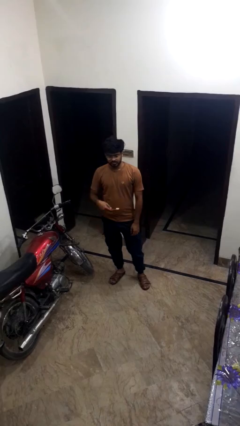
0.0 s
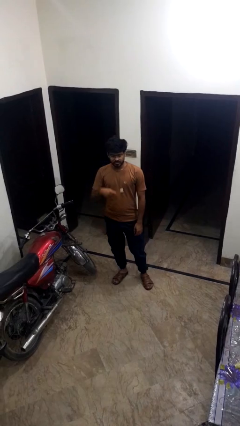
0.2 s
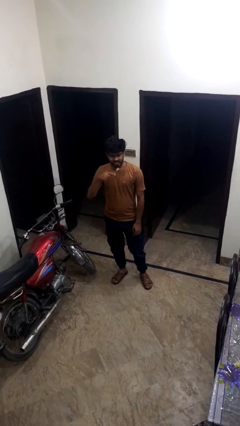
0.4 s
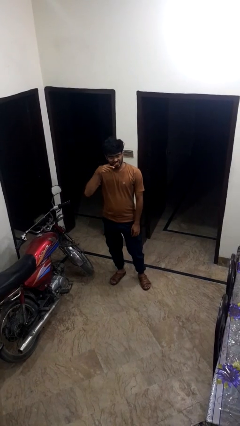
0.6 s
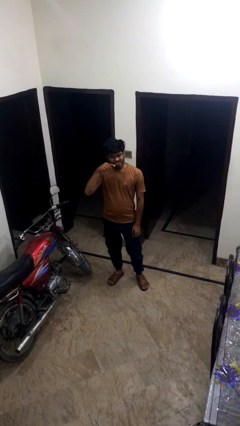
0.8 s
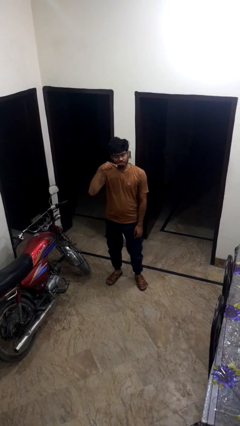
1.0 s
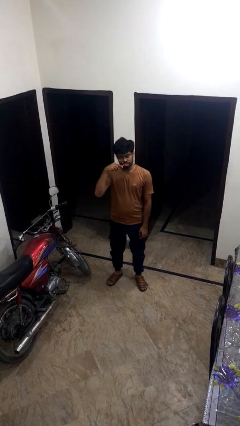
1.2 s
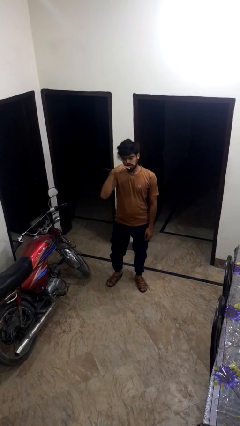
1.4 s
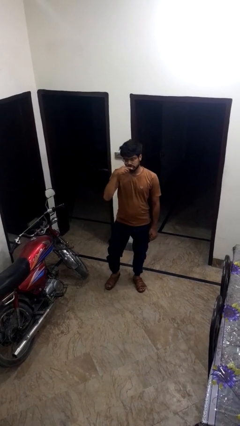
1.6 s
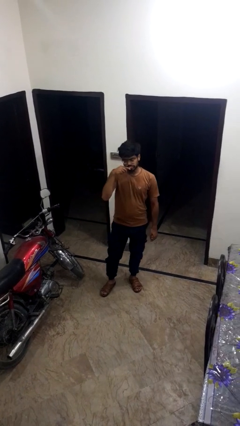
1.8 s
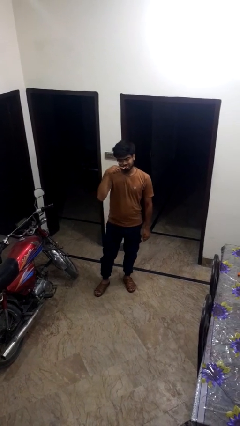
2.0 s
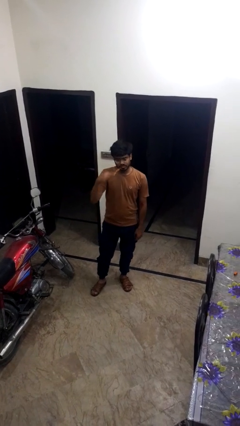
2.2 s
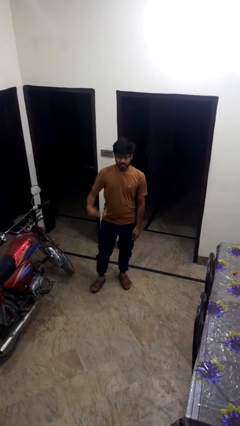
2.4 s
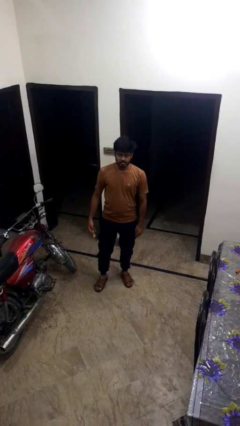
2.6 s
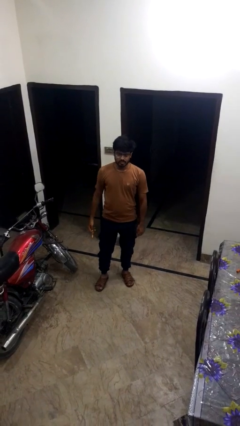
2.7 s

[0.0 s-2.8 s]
person brushes teeth

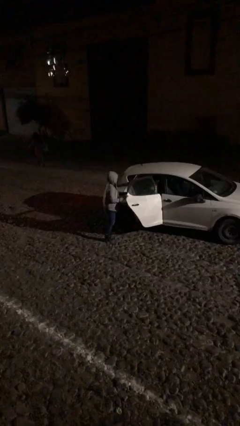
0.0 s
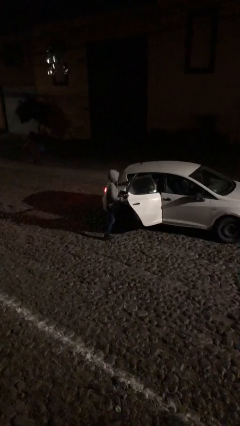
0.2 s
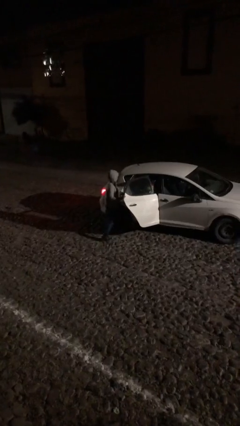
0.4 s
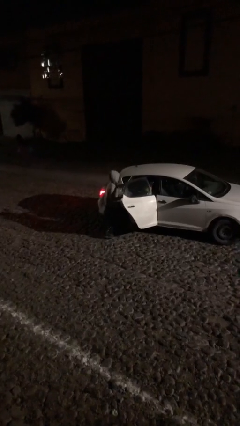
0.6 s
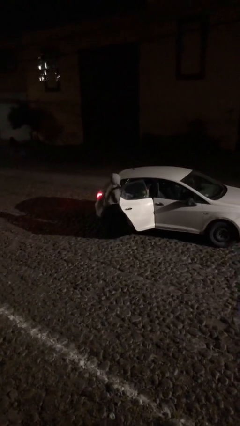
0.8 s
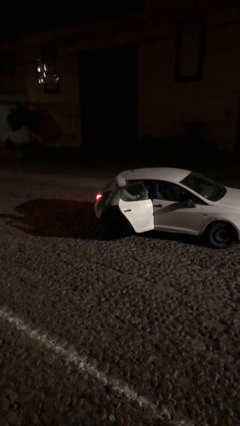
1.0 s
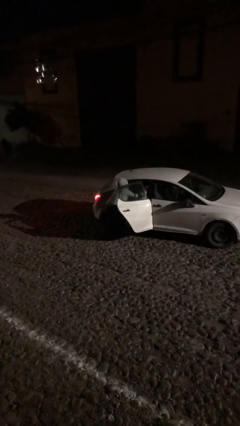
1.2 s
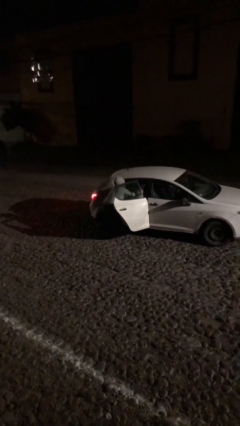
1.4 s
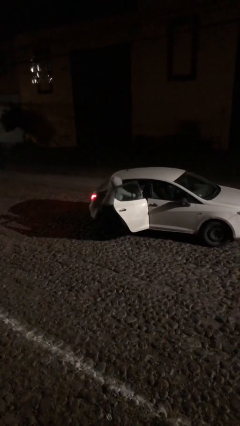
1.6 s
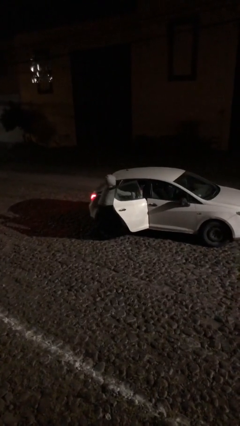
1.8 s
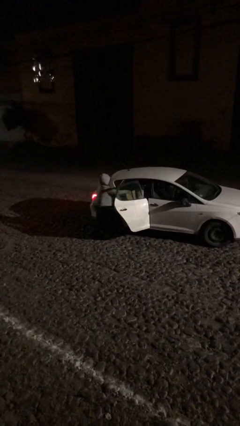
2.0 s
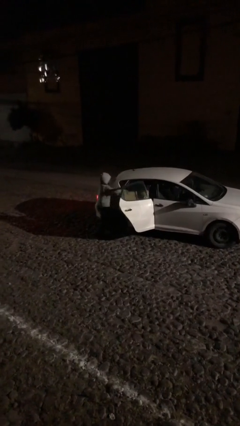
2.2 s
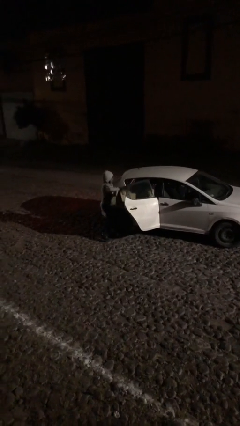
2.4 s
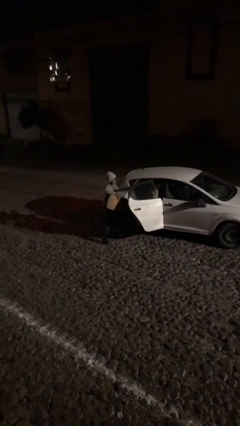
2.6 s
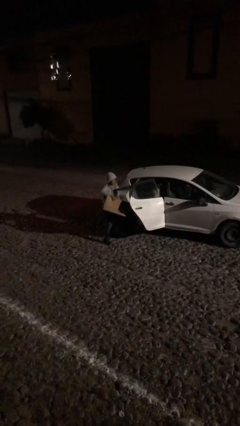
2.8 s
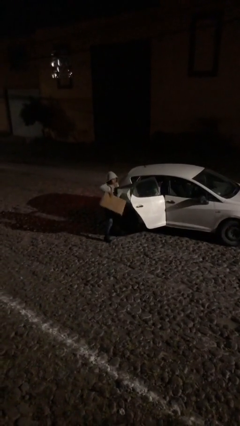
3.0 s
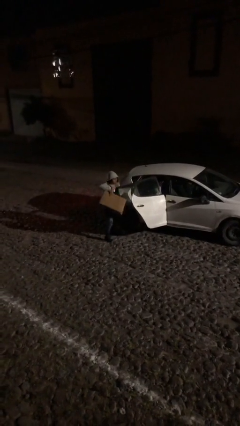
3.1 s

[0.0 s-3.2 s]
person unloads car

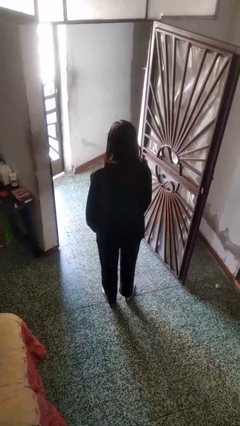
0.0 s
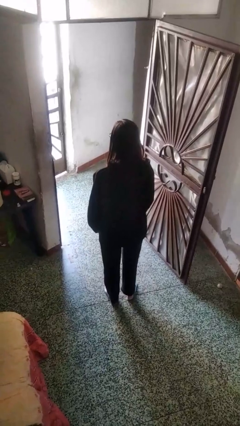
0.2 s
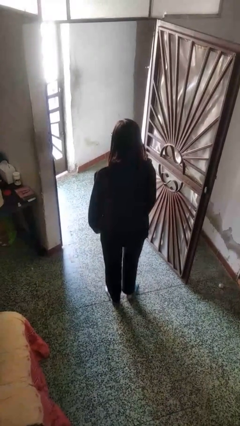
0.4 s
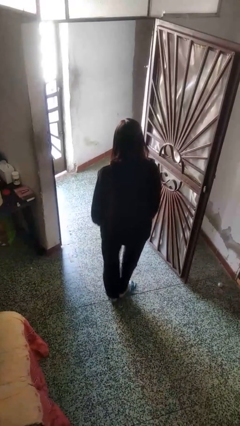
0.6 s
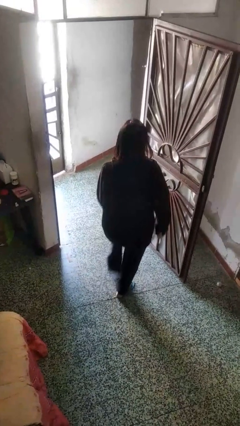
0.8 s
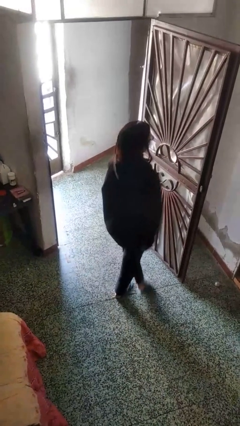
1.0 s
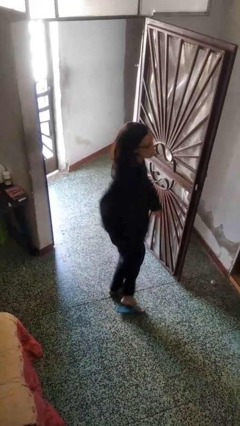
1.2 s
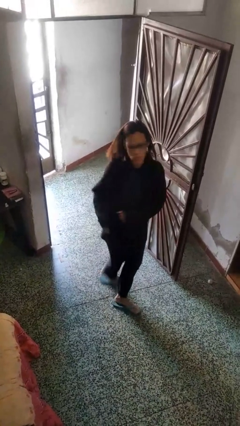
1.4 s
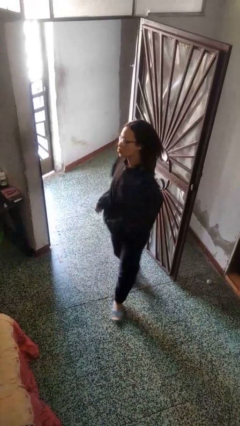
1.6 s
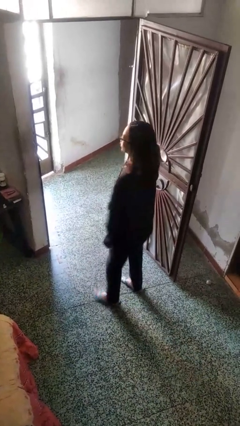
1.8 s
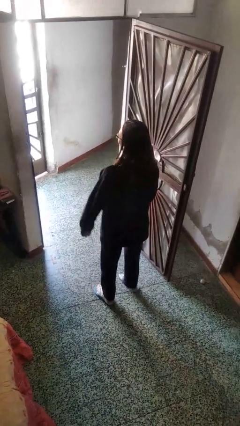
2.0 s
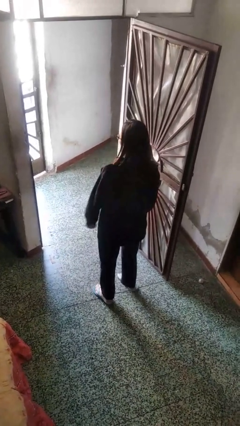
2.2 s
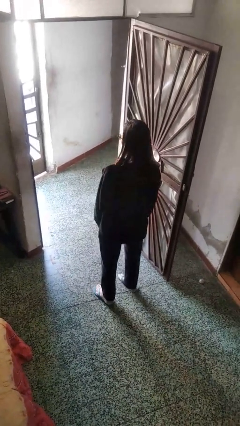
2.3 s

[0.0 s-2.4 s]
person twirls

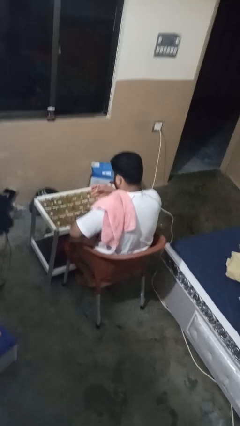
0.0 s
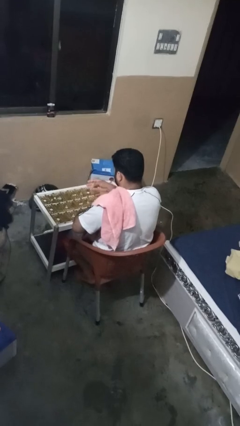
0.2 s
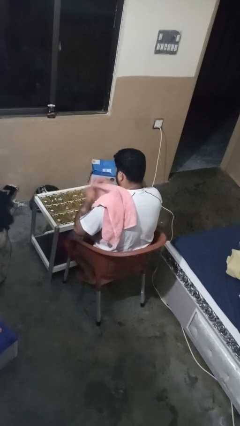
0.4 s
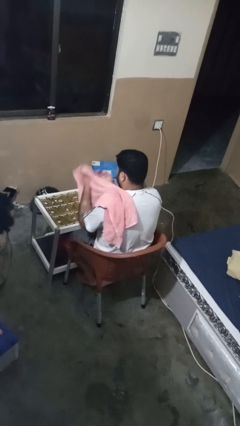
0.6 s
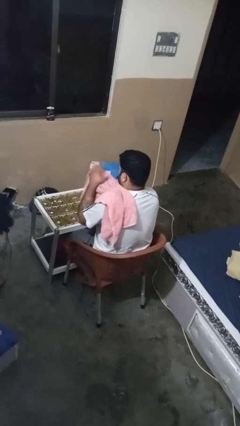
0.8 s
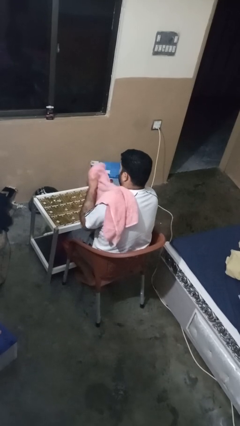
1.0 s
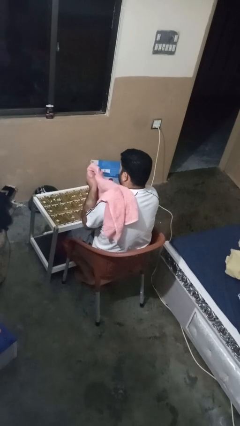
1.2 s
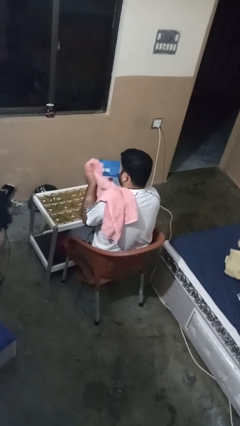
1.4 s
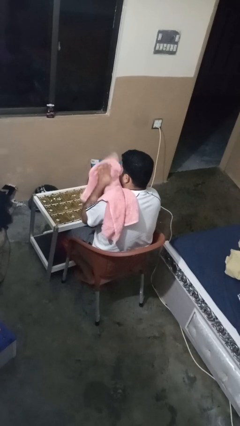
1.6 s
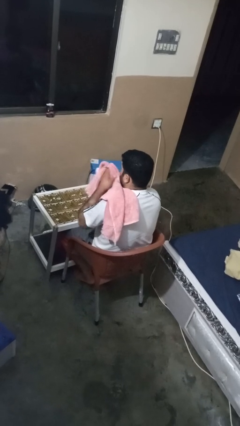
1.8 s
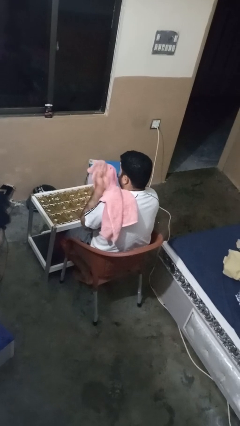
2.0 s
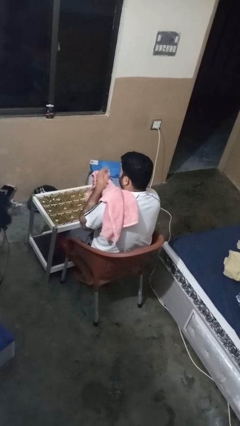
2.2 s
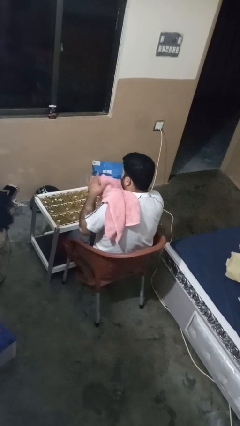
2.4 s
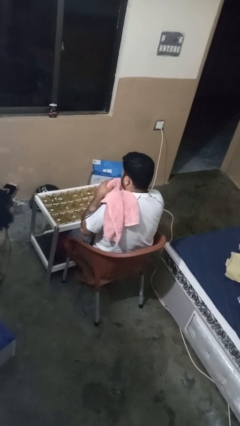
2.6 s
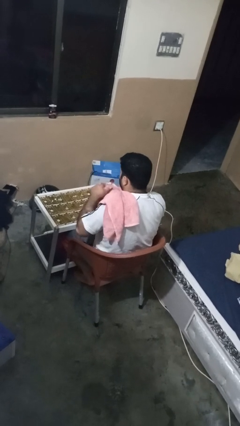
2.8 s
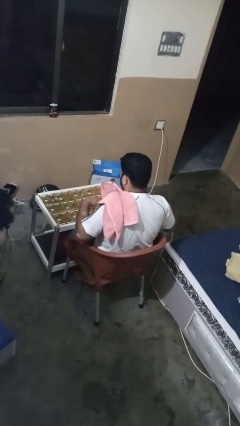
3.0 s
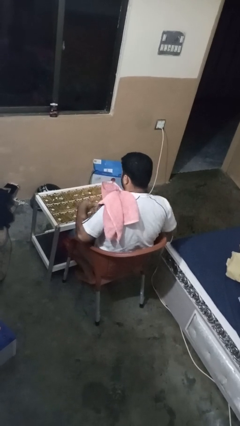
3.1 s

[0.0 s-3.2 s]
person dries hands with towel

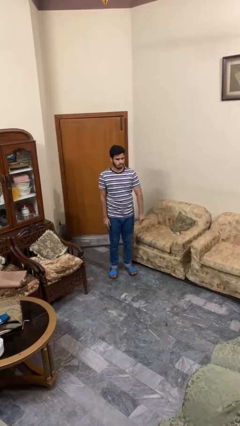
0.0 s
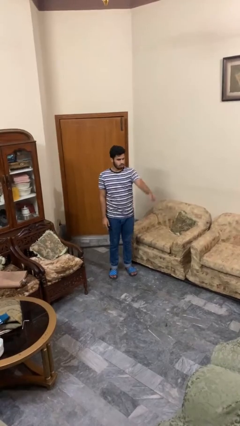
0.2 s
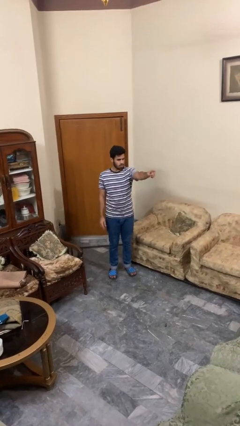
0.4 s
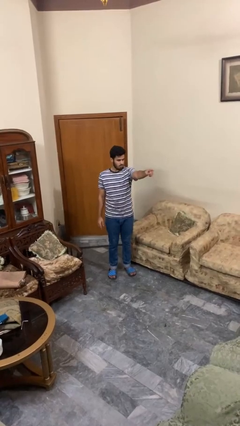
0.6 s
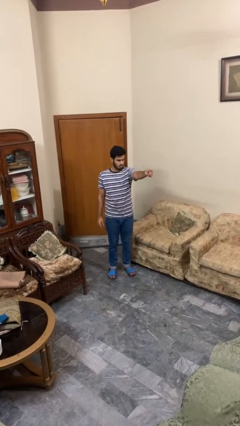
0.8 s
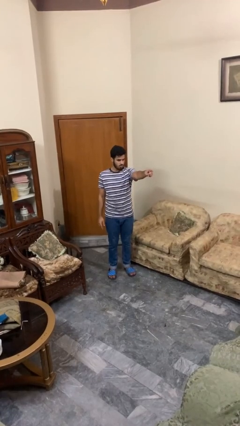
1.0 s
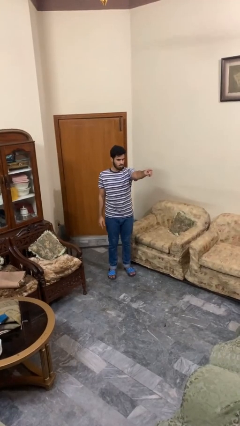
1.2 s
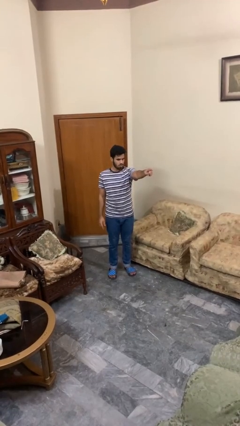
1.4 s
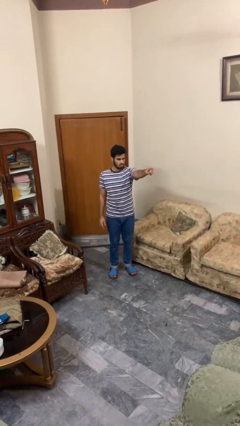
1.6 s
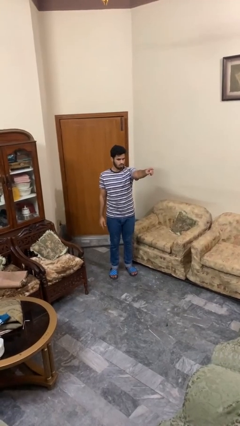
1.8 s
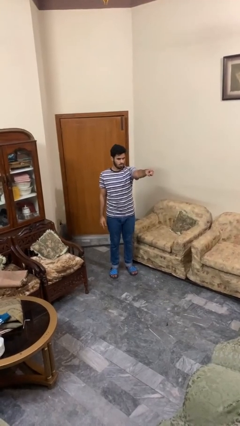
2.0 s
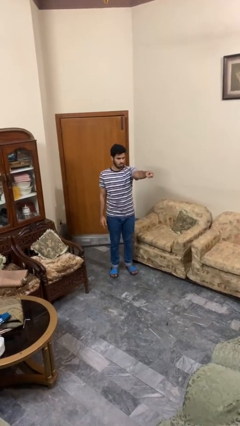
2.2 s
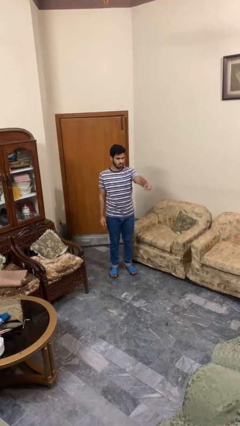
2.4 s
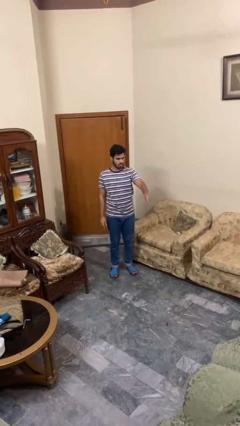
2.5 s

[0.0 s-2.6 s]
person points at person

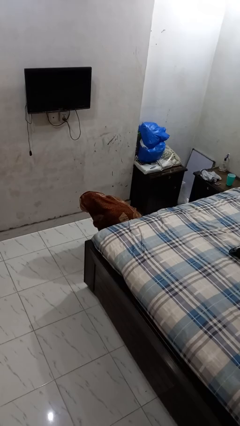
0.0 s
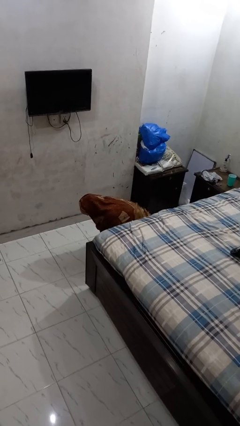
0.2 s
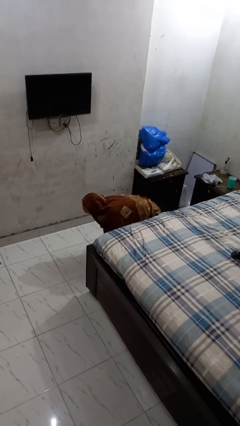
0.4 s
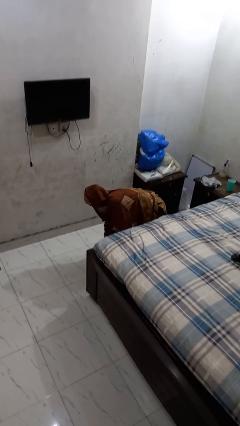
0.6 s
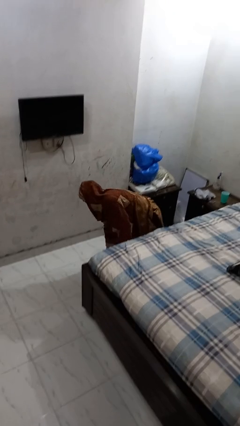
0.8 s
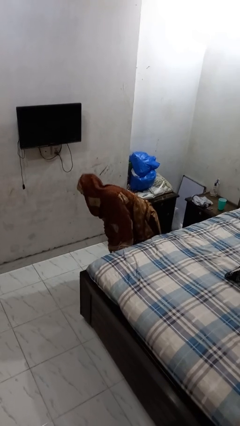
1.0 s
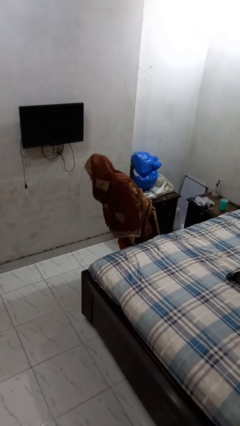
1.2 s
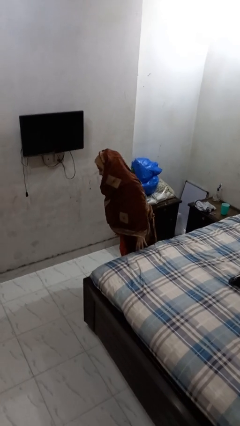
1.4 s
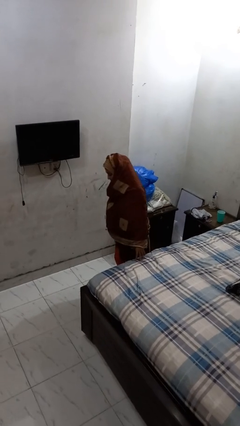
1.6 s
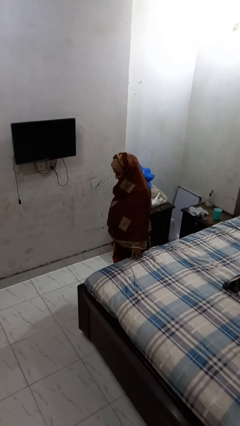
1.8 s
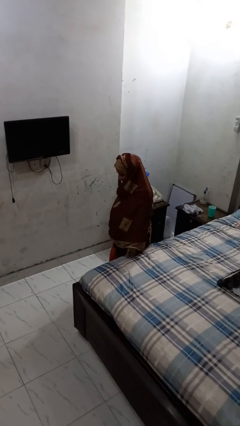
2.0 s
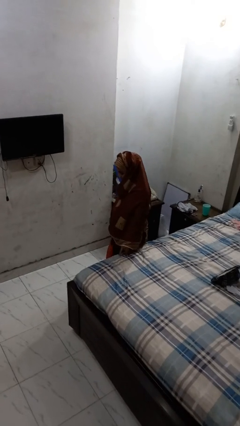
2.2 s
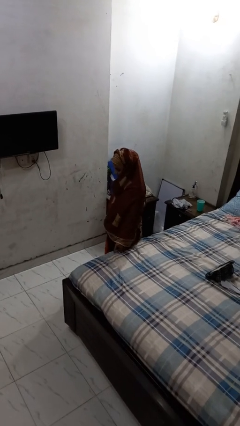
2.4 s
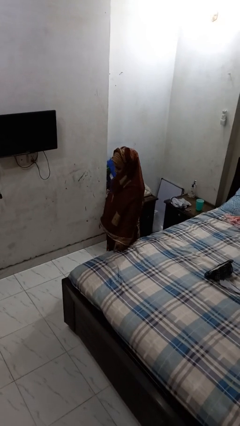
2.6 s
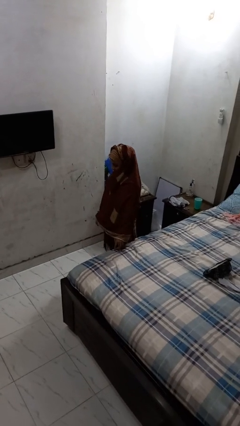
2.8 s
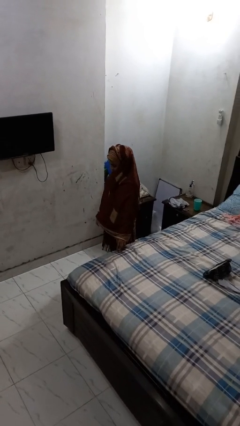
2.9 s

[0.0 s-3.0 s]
person stands up from floor

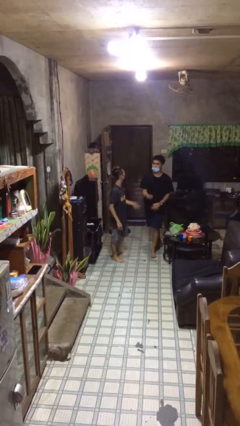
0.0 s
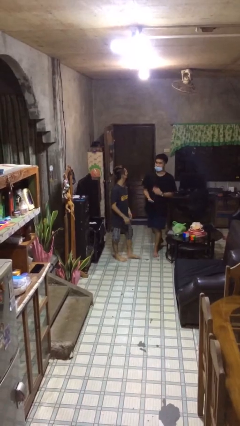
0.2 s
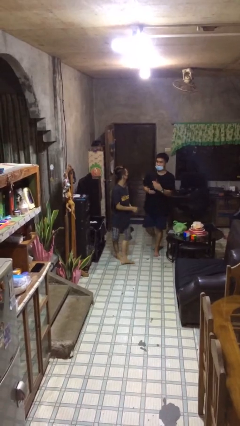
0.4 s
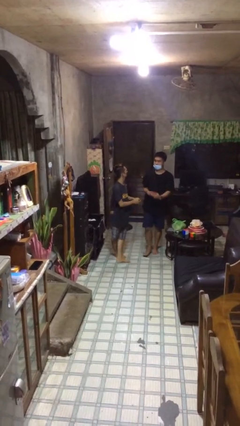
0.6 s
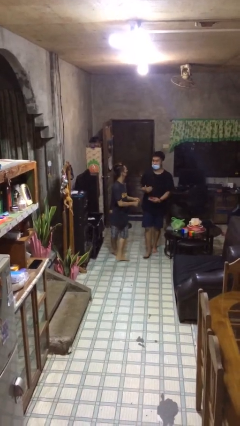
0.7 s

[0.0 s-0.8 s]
person talks to person
